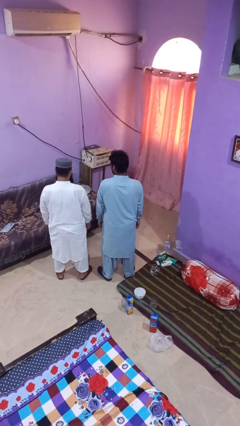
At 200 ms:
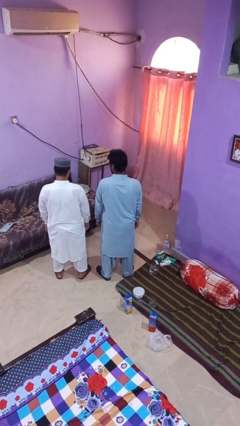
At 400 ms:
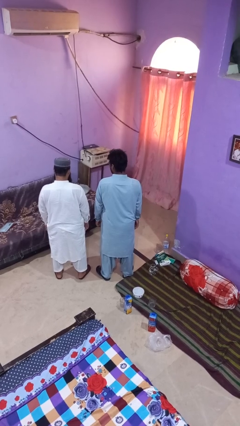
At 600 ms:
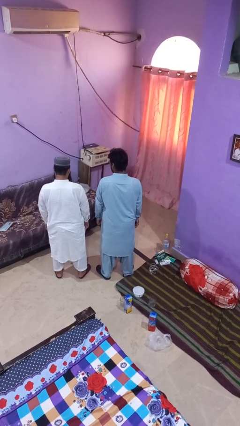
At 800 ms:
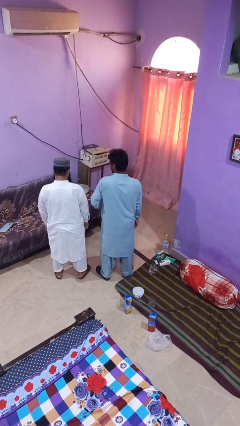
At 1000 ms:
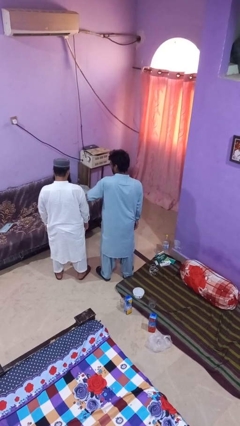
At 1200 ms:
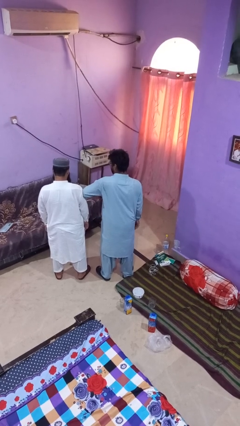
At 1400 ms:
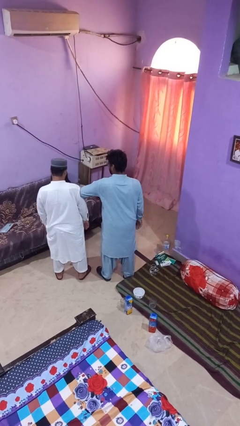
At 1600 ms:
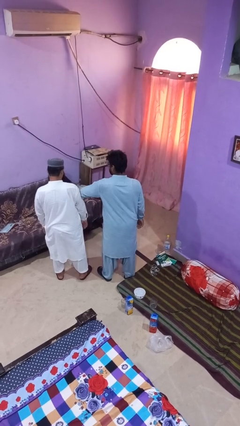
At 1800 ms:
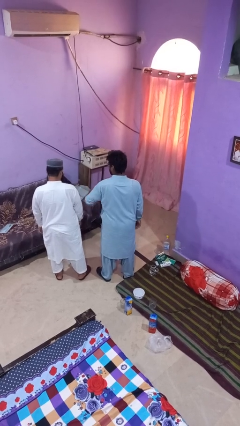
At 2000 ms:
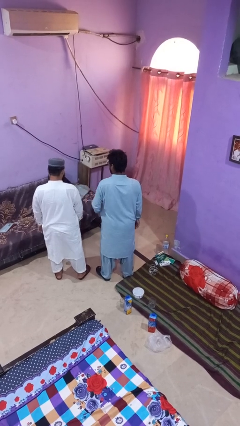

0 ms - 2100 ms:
person nudges person with elbow

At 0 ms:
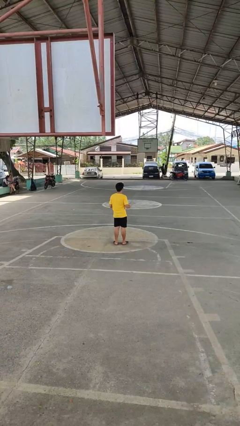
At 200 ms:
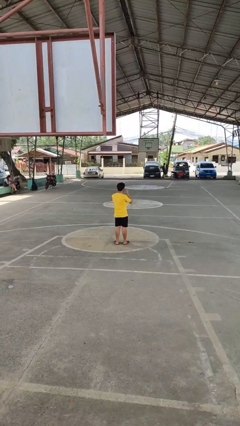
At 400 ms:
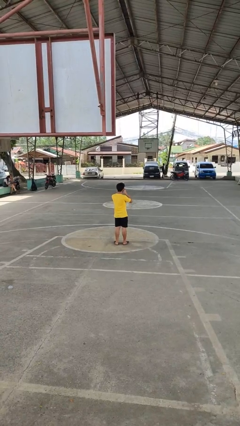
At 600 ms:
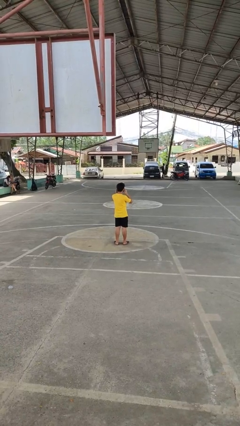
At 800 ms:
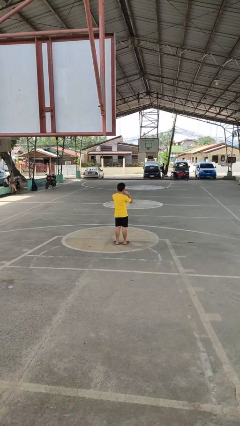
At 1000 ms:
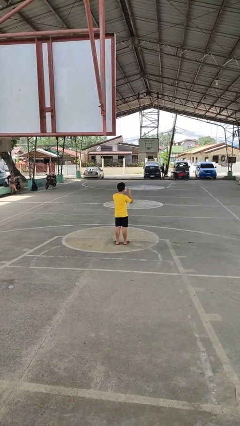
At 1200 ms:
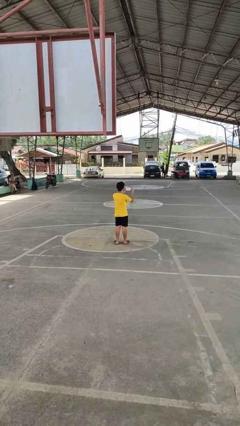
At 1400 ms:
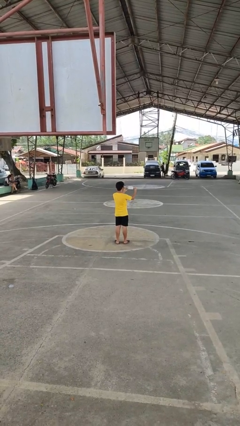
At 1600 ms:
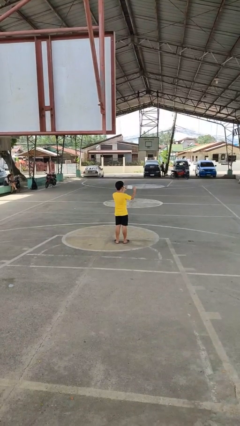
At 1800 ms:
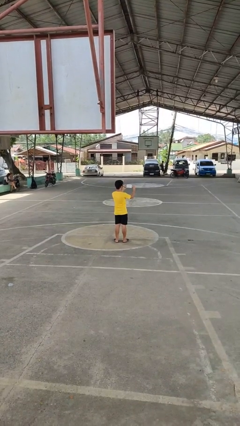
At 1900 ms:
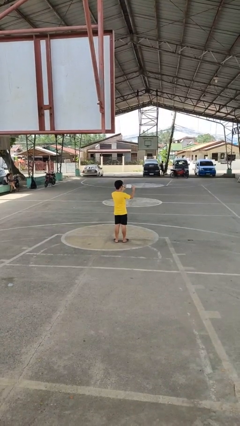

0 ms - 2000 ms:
person takes off facemask

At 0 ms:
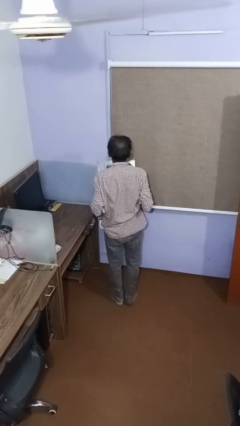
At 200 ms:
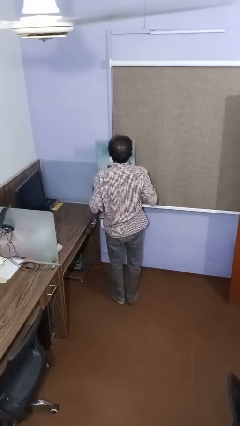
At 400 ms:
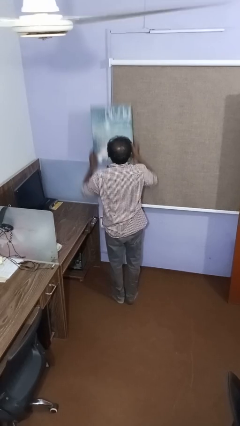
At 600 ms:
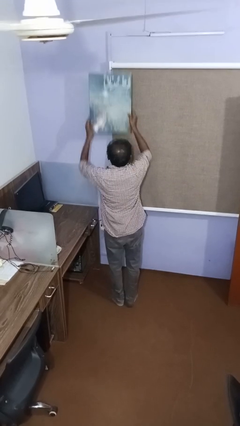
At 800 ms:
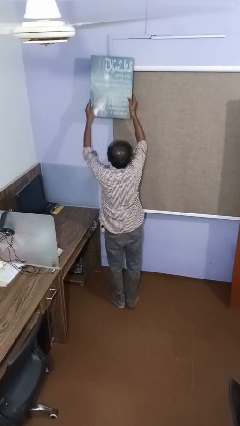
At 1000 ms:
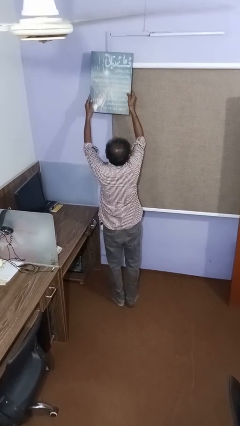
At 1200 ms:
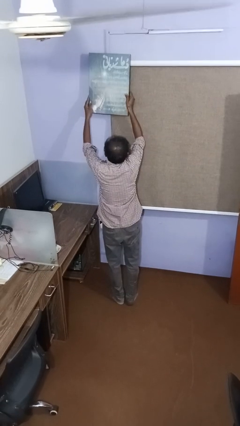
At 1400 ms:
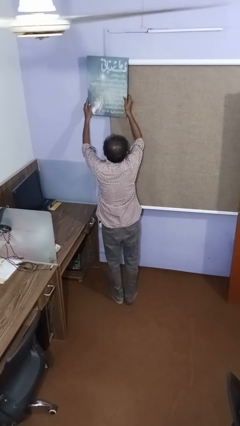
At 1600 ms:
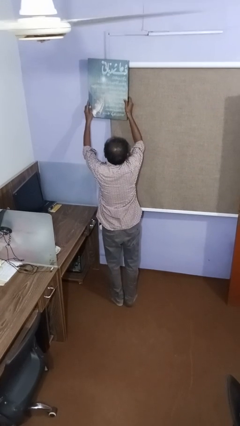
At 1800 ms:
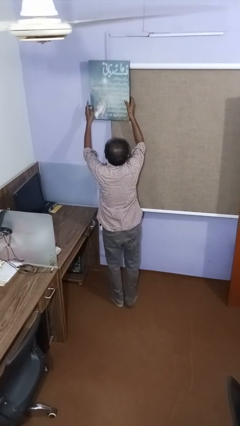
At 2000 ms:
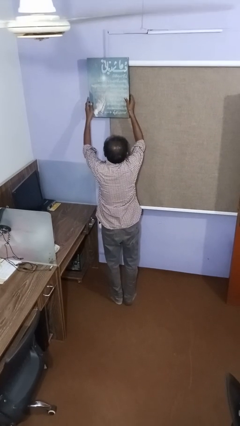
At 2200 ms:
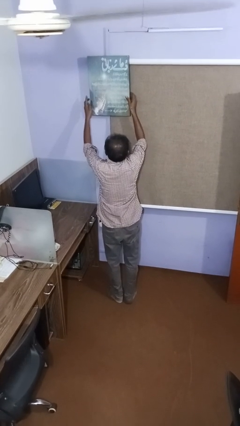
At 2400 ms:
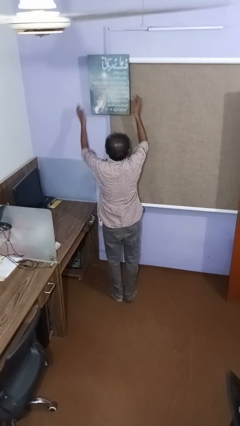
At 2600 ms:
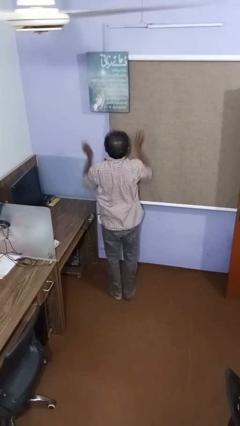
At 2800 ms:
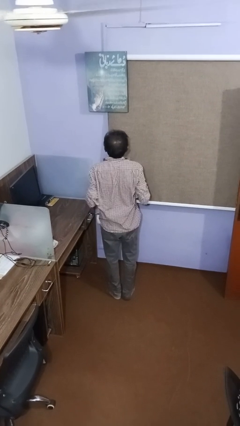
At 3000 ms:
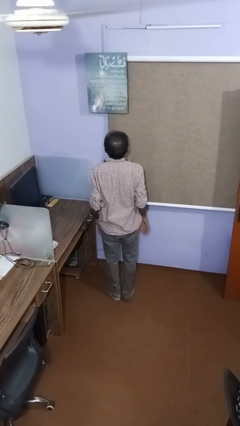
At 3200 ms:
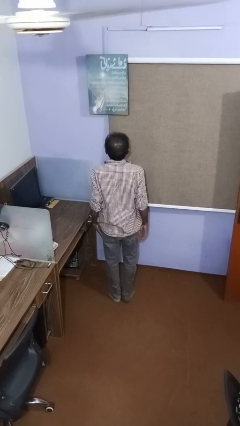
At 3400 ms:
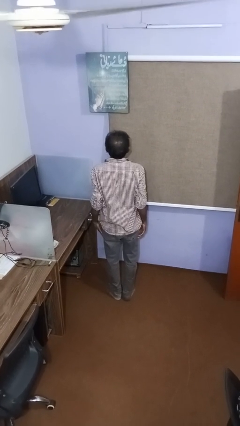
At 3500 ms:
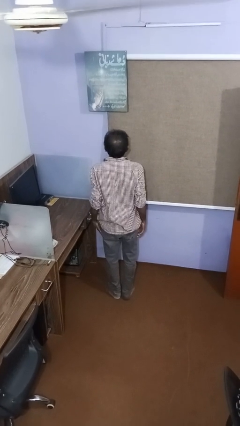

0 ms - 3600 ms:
person puts up picture frame

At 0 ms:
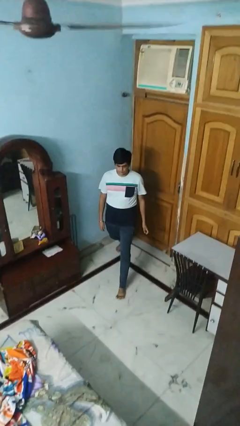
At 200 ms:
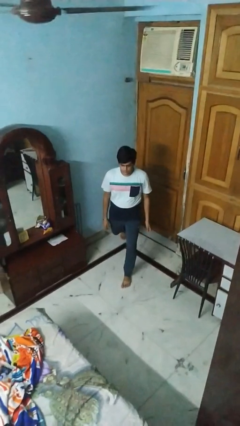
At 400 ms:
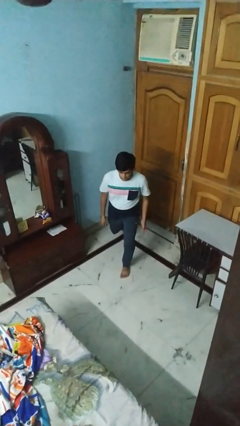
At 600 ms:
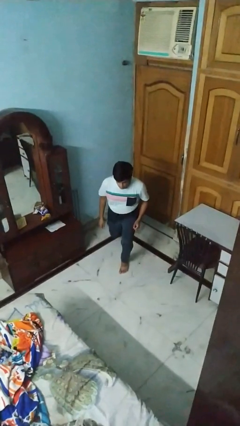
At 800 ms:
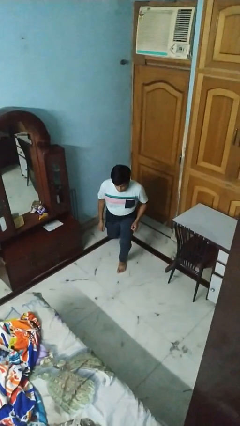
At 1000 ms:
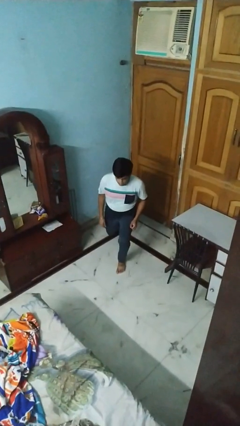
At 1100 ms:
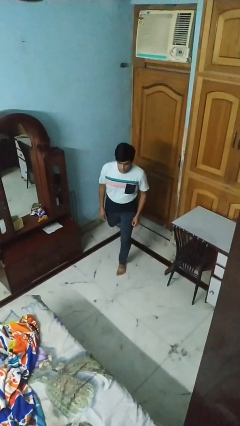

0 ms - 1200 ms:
person exercises with lunges

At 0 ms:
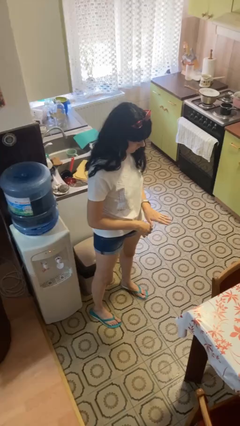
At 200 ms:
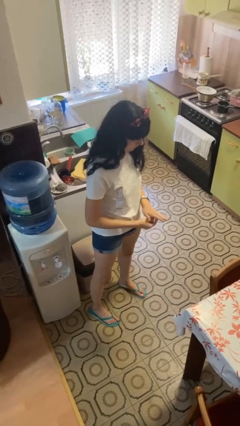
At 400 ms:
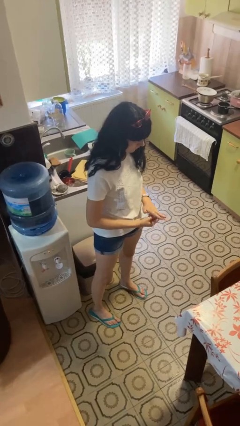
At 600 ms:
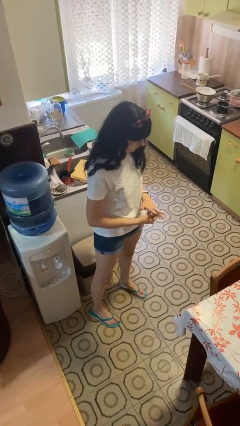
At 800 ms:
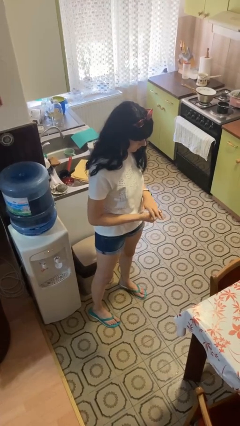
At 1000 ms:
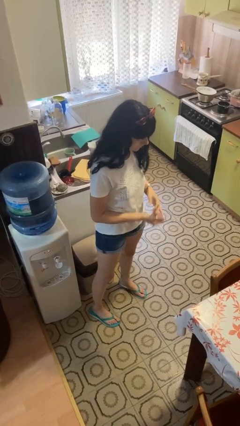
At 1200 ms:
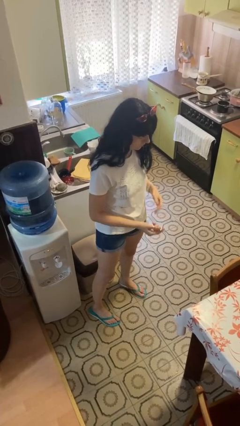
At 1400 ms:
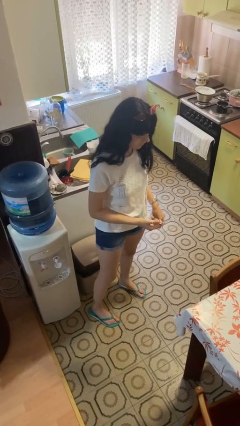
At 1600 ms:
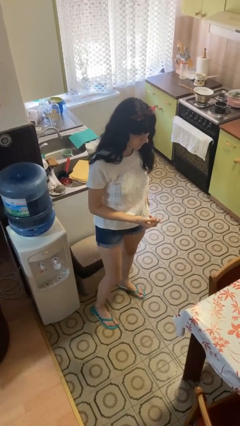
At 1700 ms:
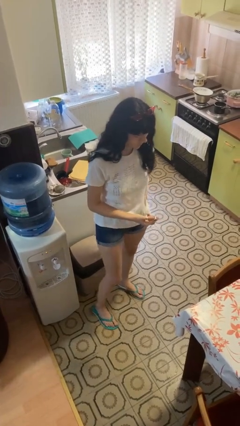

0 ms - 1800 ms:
person takes off ring

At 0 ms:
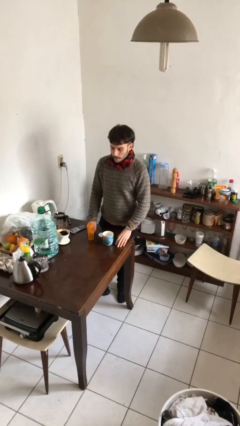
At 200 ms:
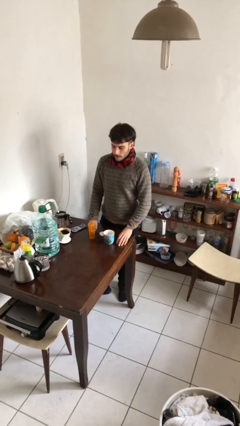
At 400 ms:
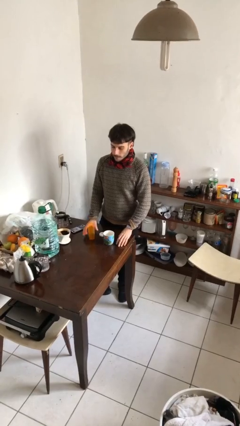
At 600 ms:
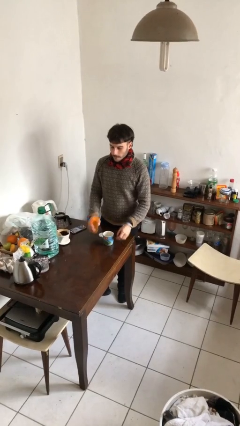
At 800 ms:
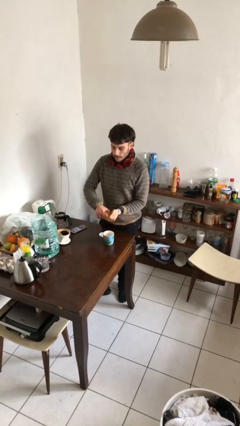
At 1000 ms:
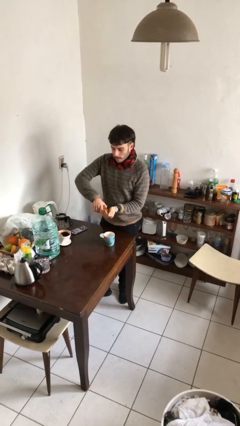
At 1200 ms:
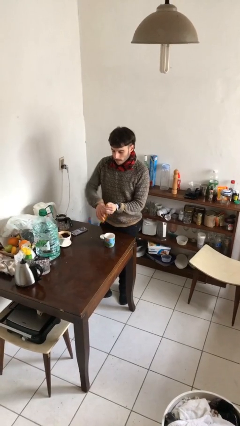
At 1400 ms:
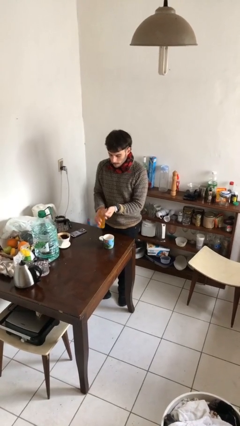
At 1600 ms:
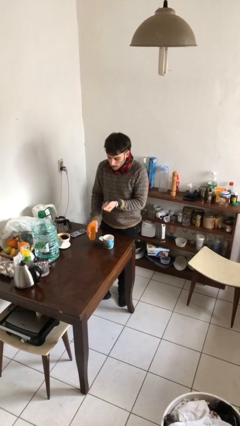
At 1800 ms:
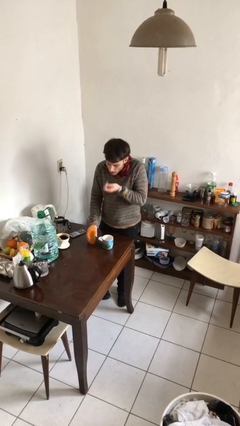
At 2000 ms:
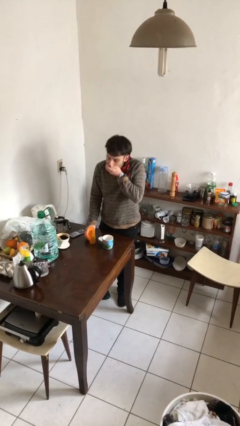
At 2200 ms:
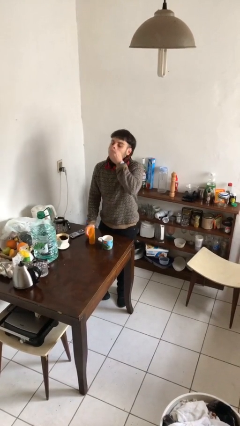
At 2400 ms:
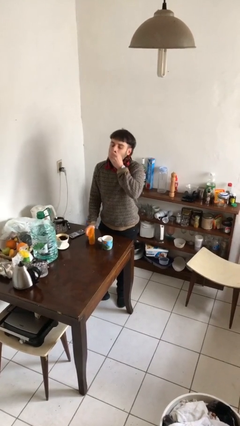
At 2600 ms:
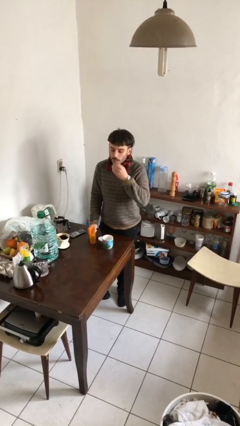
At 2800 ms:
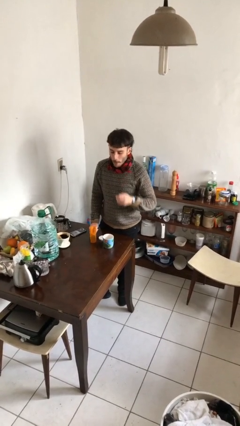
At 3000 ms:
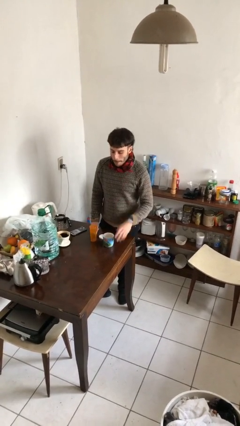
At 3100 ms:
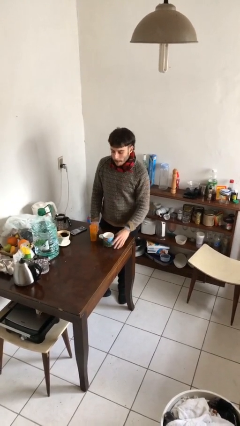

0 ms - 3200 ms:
person takes medicine pills

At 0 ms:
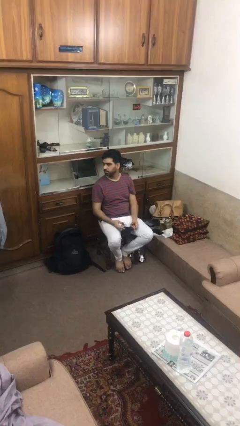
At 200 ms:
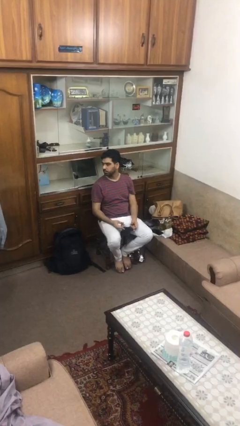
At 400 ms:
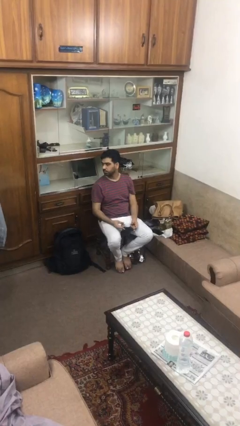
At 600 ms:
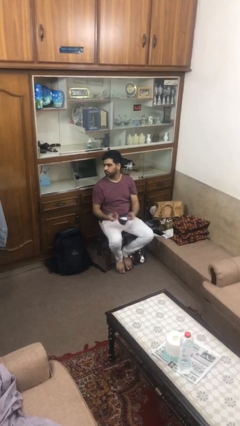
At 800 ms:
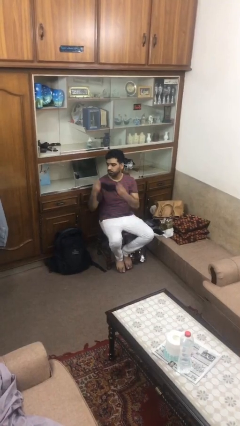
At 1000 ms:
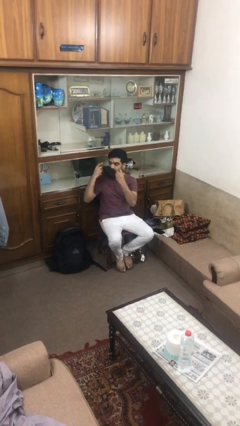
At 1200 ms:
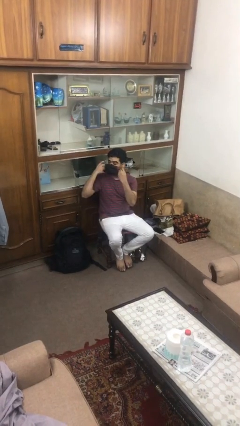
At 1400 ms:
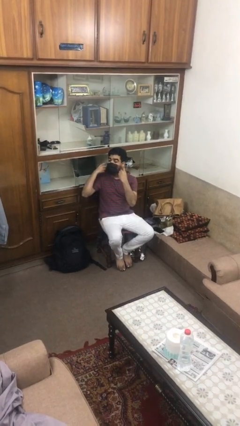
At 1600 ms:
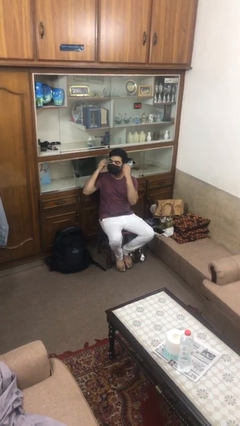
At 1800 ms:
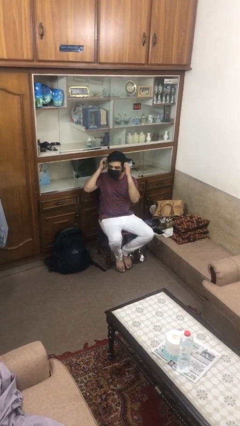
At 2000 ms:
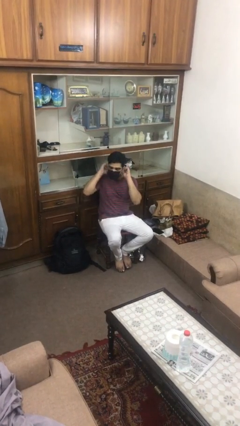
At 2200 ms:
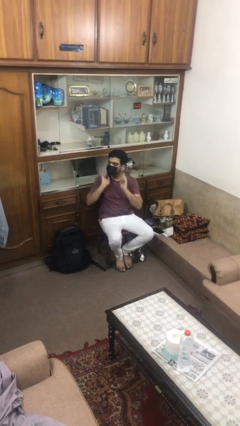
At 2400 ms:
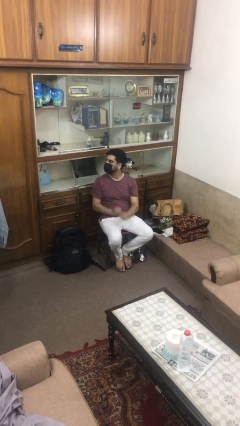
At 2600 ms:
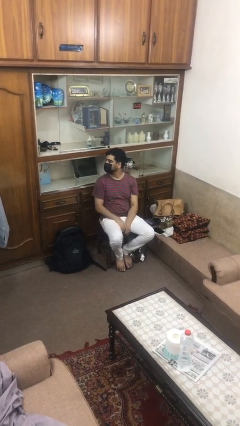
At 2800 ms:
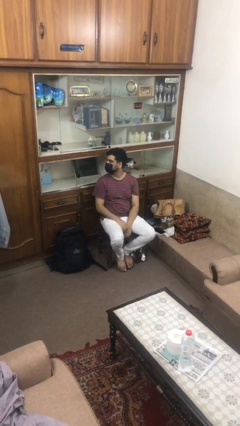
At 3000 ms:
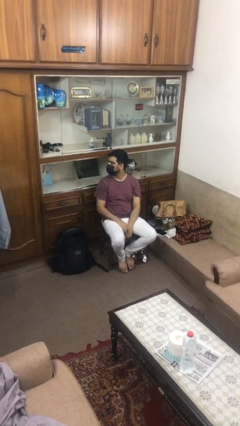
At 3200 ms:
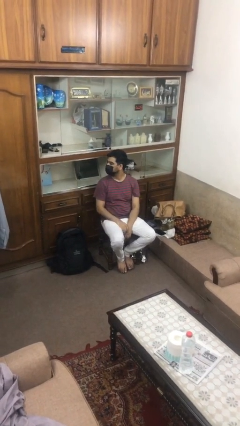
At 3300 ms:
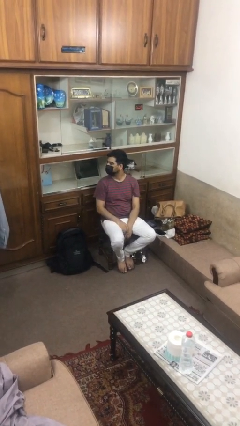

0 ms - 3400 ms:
person puts on facemask
